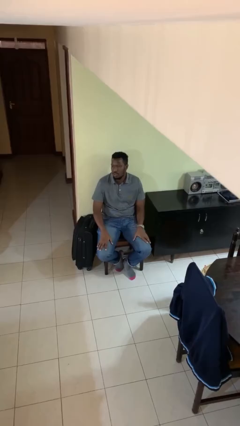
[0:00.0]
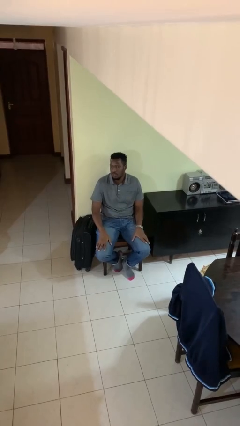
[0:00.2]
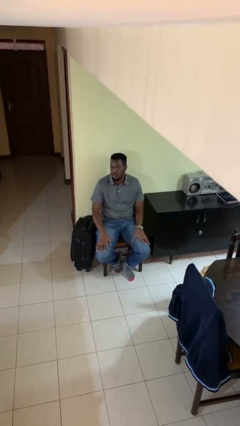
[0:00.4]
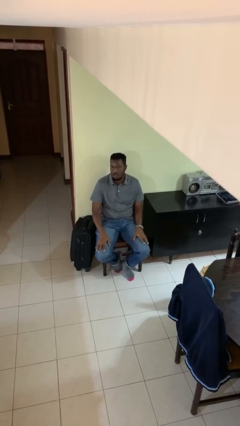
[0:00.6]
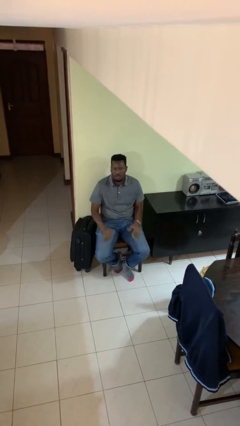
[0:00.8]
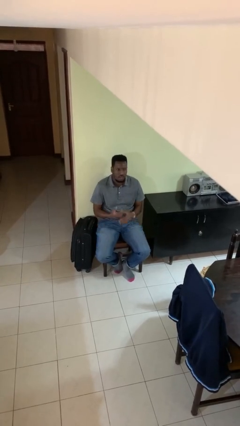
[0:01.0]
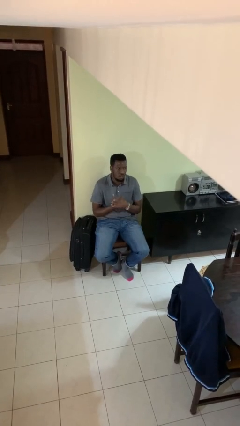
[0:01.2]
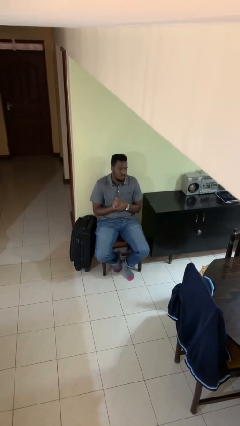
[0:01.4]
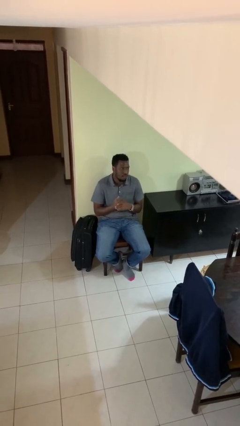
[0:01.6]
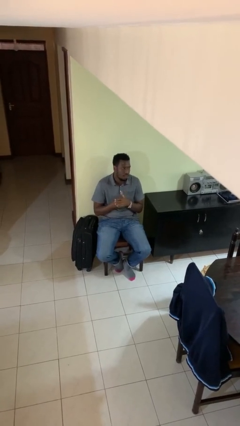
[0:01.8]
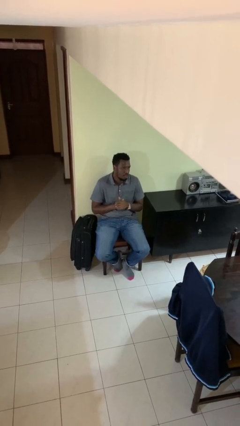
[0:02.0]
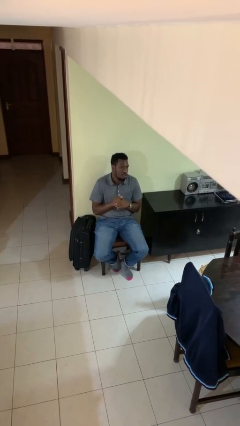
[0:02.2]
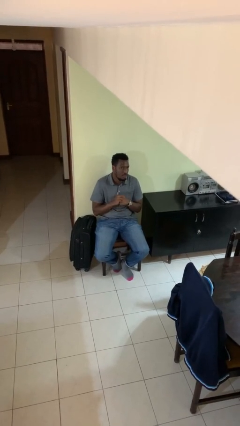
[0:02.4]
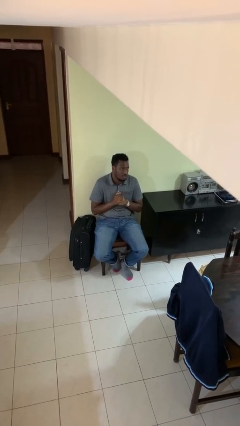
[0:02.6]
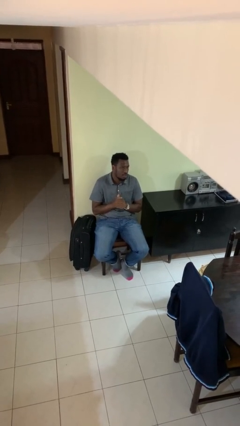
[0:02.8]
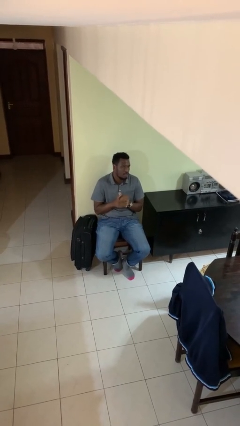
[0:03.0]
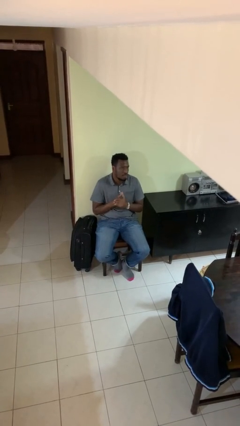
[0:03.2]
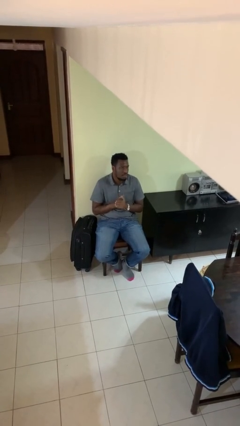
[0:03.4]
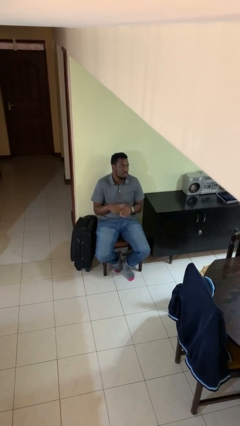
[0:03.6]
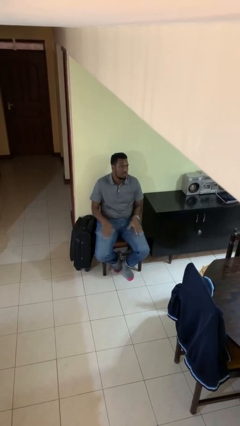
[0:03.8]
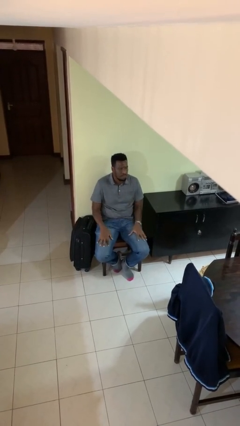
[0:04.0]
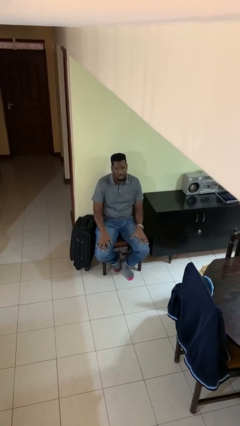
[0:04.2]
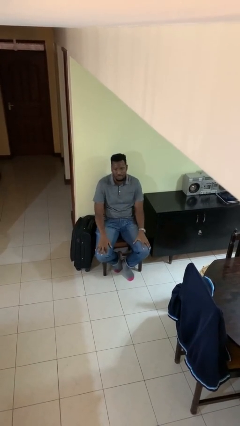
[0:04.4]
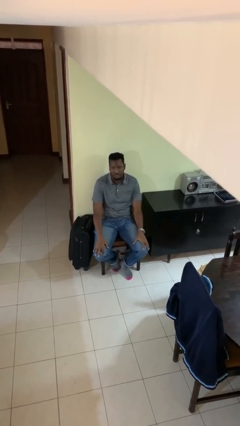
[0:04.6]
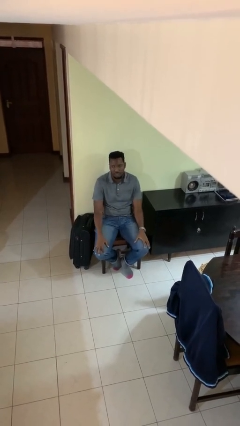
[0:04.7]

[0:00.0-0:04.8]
person cracks knuckles

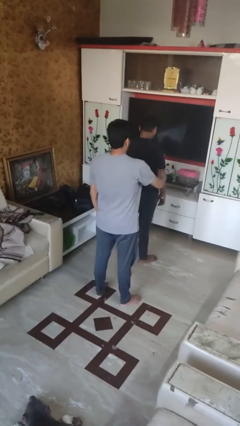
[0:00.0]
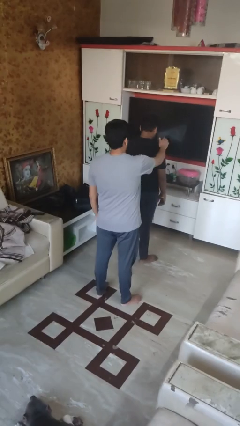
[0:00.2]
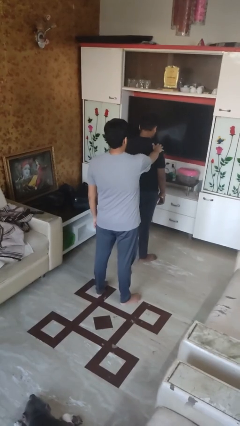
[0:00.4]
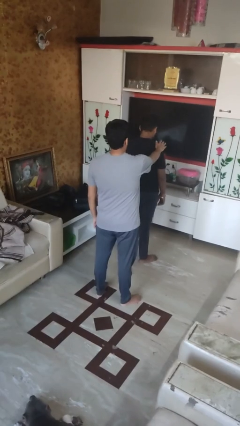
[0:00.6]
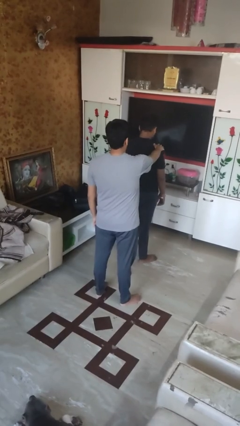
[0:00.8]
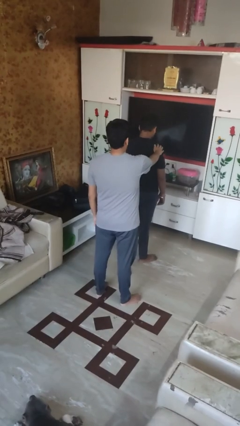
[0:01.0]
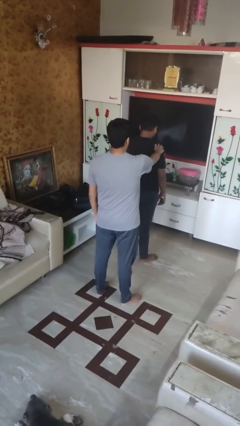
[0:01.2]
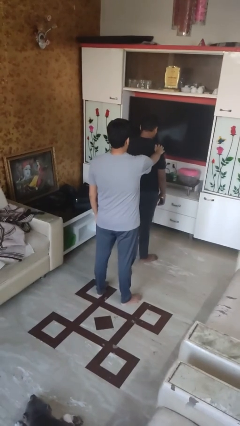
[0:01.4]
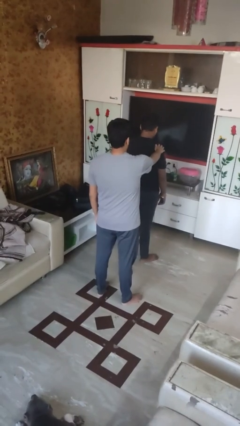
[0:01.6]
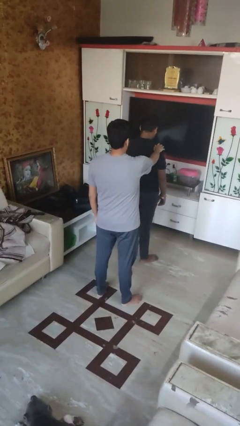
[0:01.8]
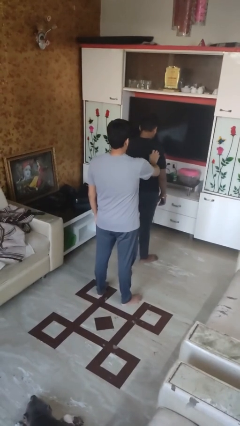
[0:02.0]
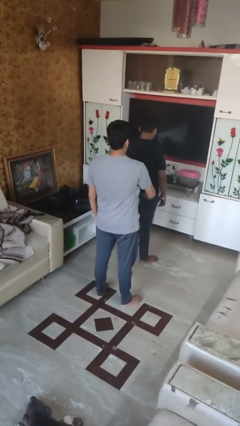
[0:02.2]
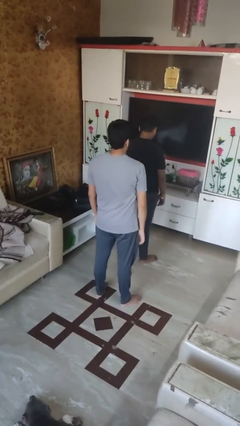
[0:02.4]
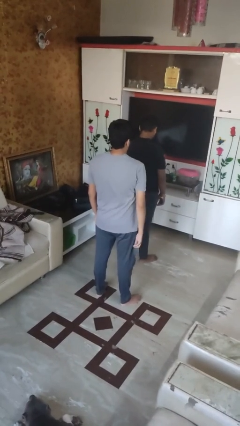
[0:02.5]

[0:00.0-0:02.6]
person pounds shoulders of person

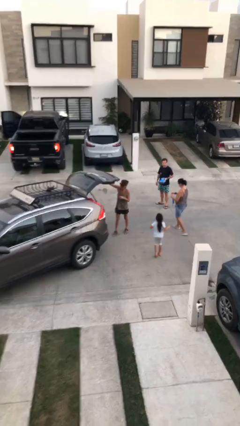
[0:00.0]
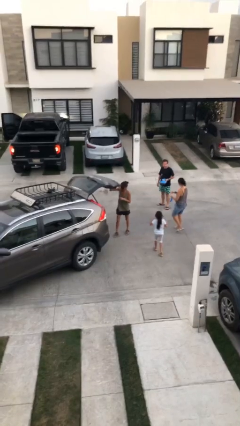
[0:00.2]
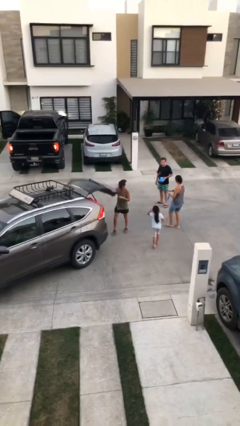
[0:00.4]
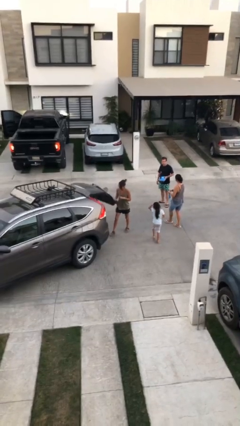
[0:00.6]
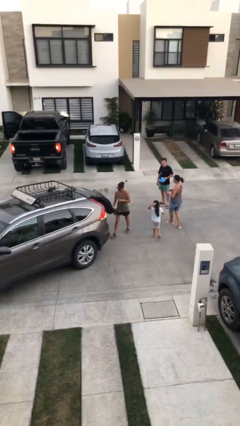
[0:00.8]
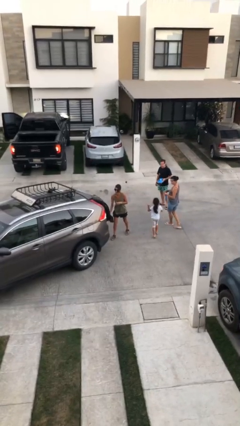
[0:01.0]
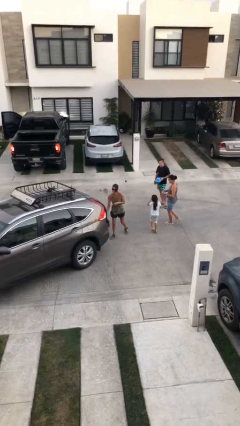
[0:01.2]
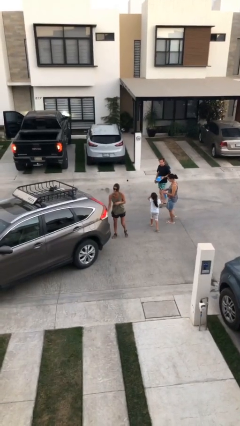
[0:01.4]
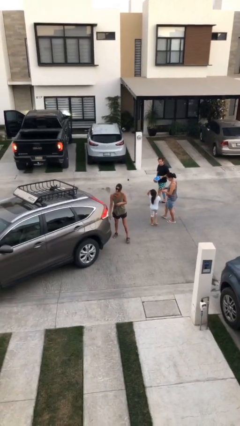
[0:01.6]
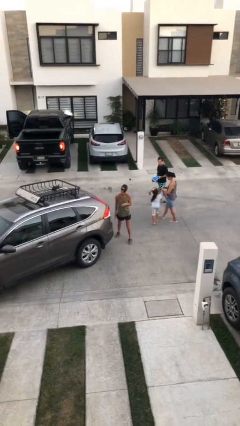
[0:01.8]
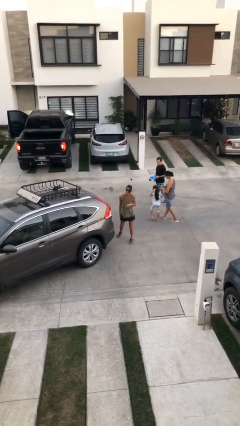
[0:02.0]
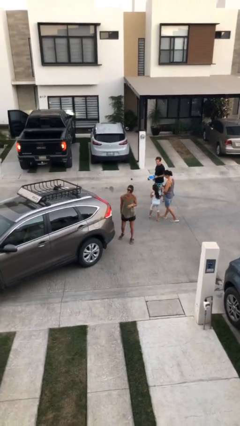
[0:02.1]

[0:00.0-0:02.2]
person closes car trunk

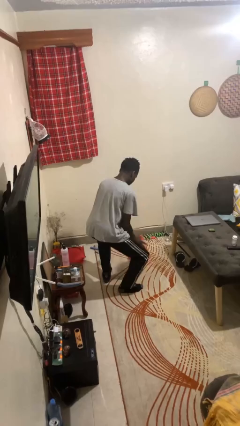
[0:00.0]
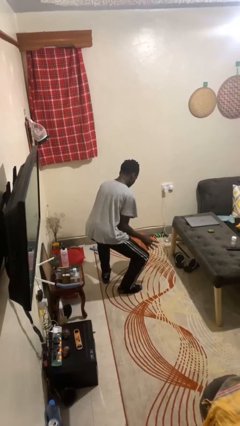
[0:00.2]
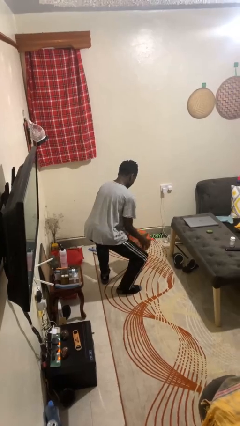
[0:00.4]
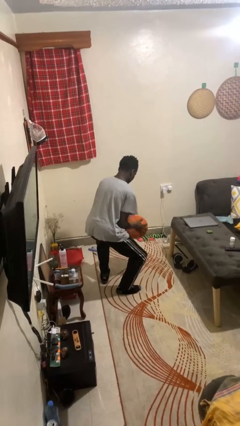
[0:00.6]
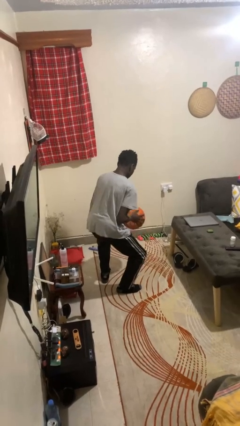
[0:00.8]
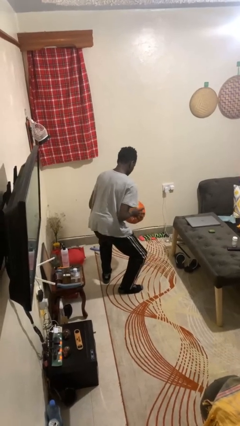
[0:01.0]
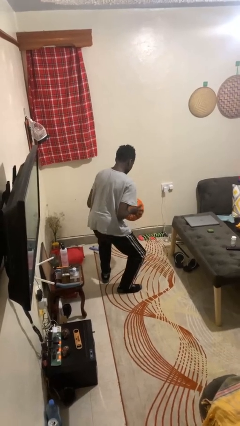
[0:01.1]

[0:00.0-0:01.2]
person bounces ball on floor

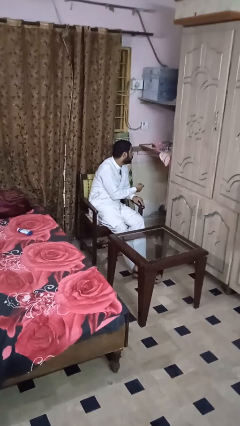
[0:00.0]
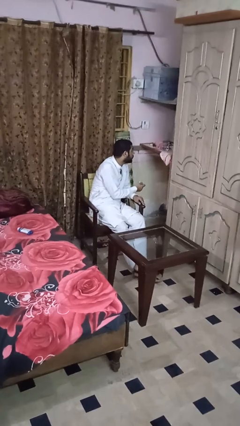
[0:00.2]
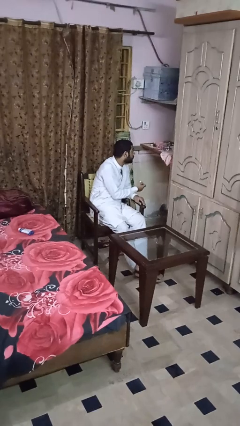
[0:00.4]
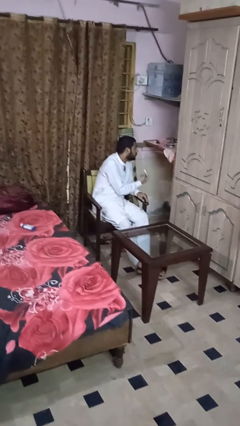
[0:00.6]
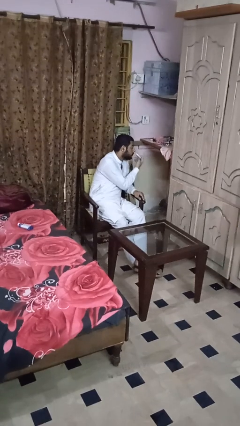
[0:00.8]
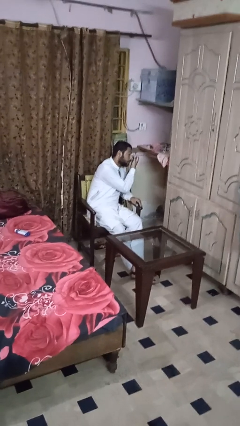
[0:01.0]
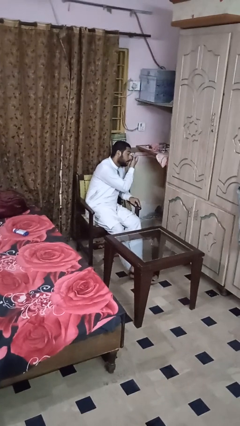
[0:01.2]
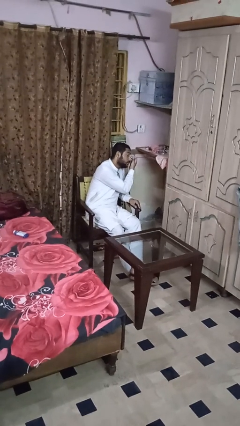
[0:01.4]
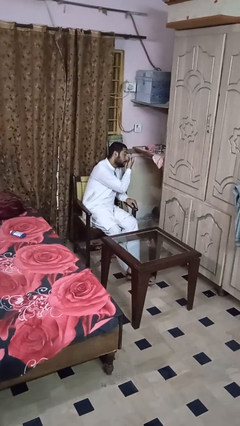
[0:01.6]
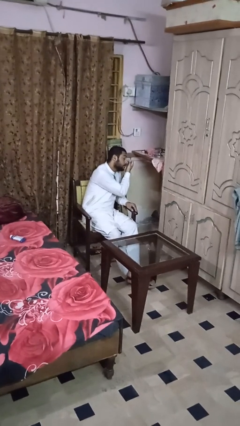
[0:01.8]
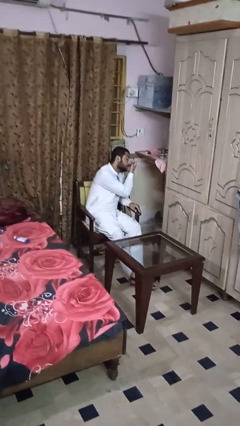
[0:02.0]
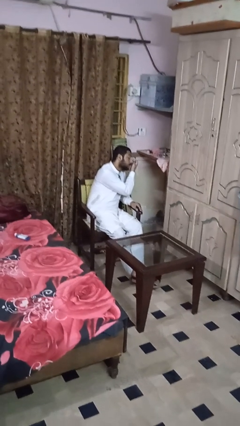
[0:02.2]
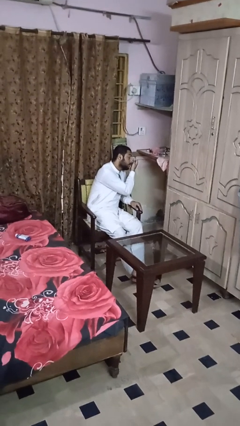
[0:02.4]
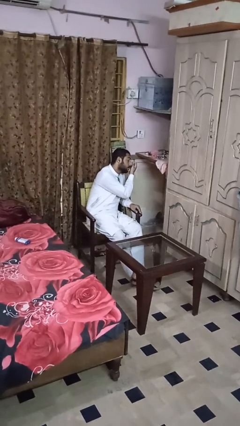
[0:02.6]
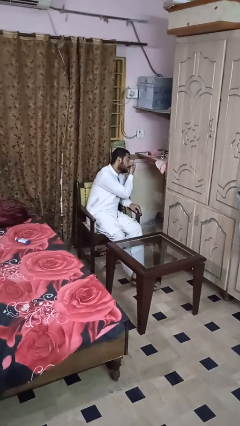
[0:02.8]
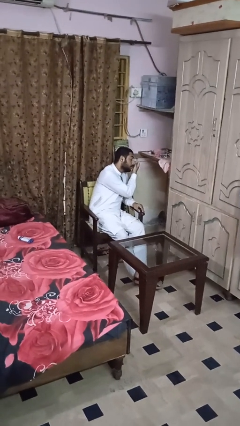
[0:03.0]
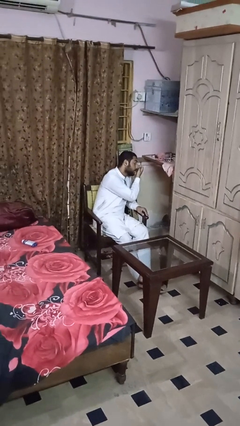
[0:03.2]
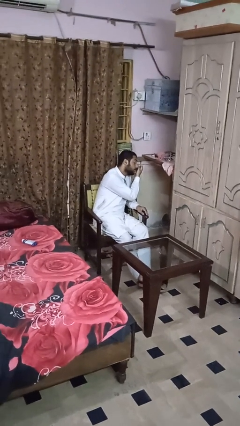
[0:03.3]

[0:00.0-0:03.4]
person applies eye makeup

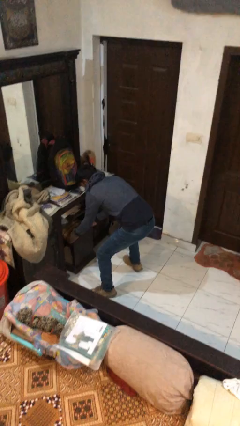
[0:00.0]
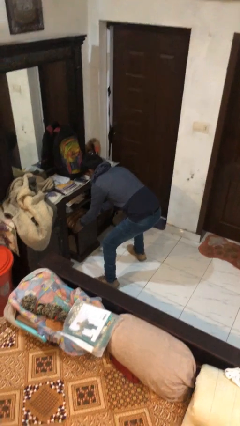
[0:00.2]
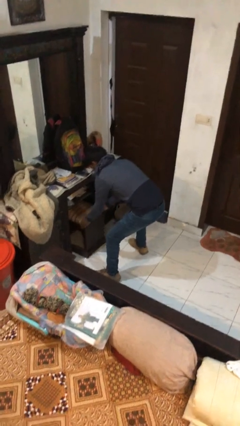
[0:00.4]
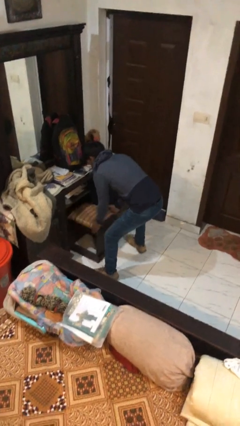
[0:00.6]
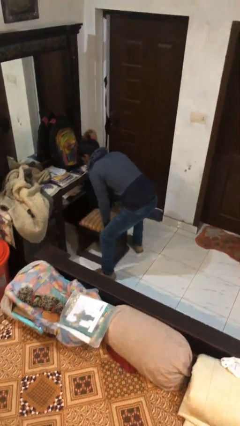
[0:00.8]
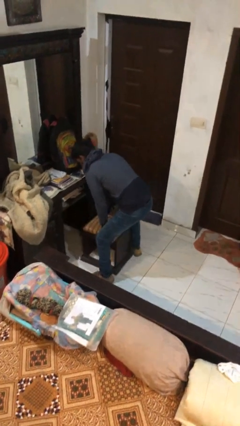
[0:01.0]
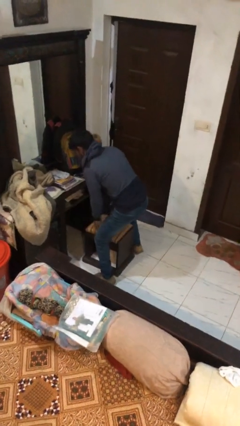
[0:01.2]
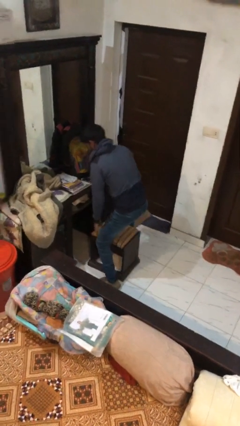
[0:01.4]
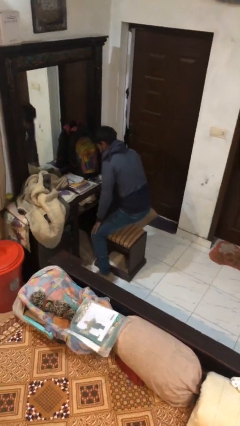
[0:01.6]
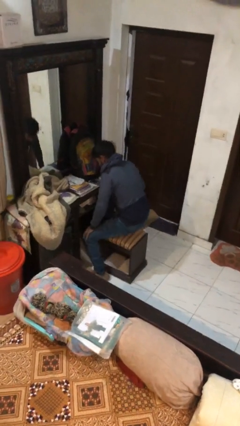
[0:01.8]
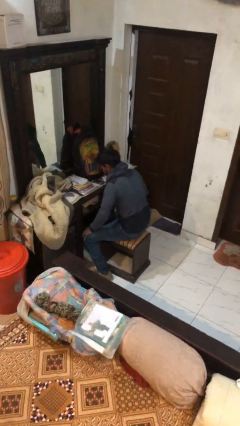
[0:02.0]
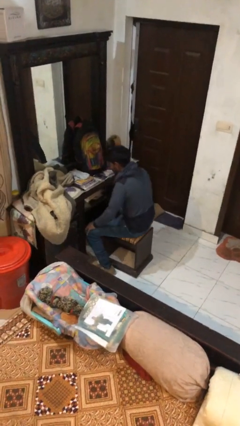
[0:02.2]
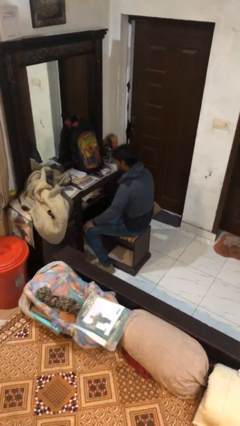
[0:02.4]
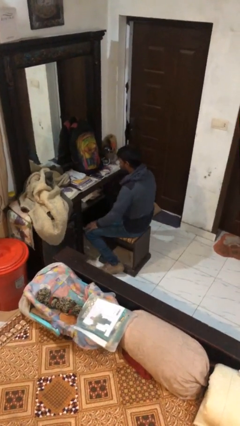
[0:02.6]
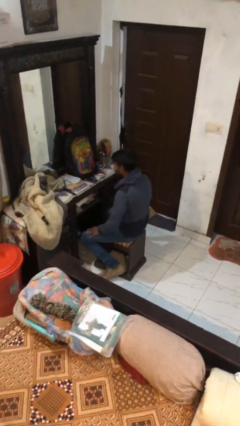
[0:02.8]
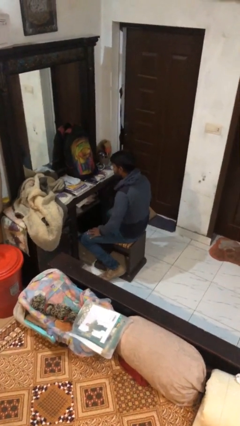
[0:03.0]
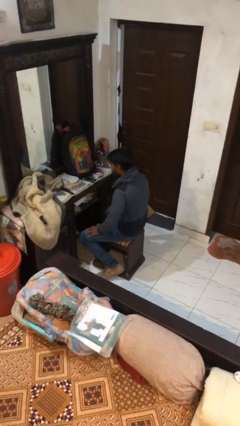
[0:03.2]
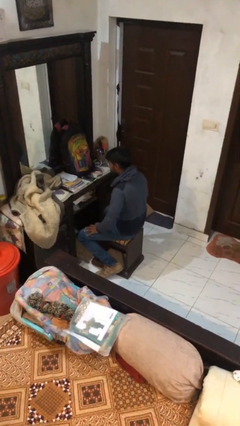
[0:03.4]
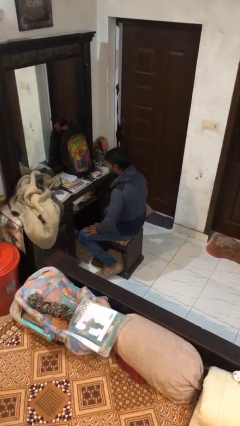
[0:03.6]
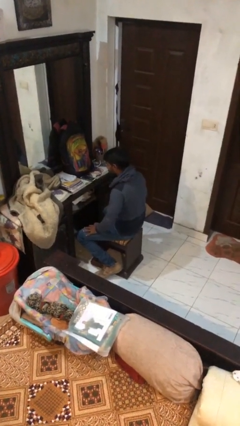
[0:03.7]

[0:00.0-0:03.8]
person sits down
